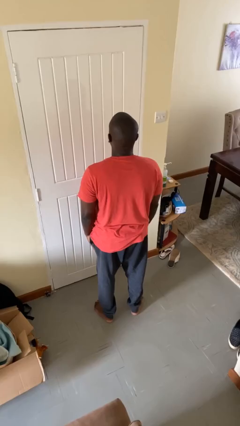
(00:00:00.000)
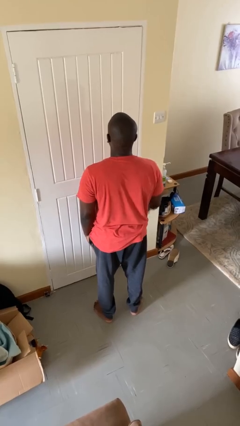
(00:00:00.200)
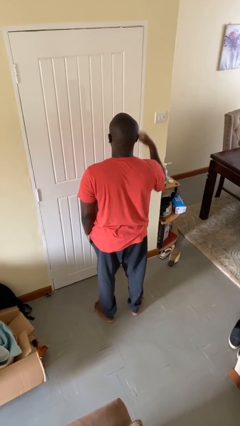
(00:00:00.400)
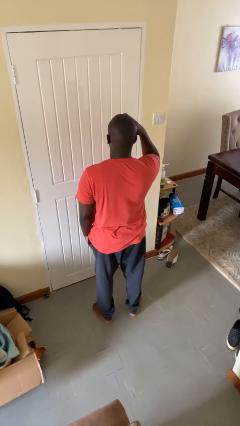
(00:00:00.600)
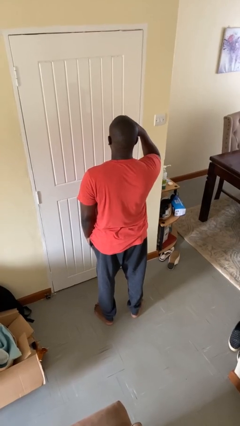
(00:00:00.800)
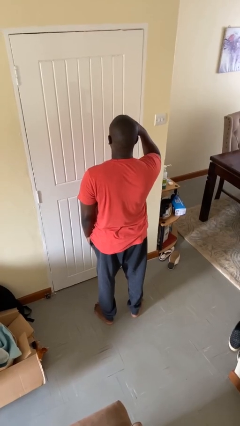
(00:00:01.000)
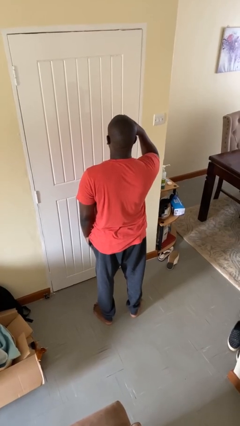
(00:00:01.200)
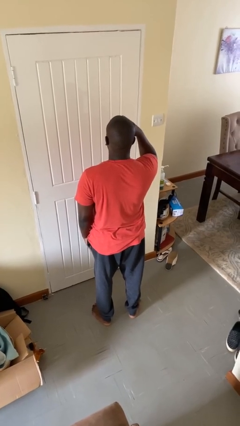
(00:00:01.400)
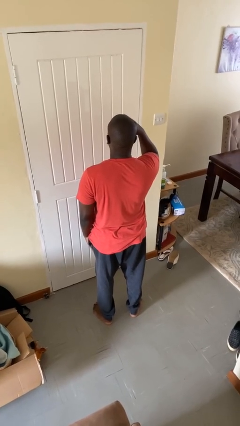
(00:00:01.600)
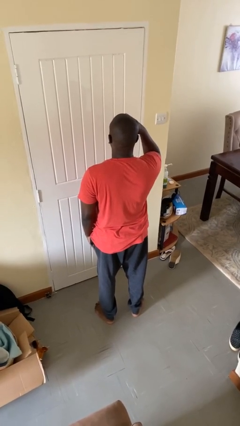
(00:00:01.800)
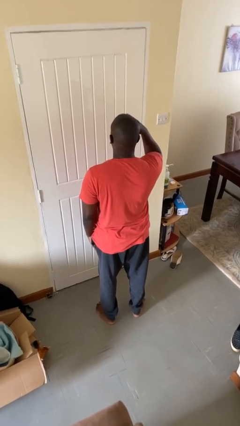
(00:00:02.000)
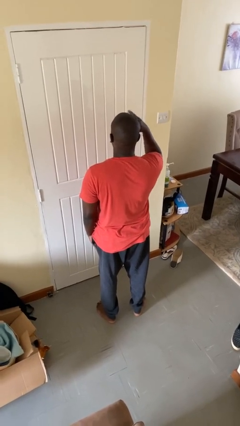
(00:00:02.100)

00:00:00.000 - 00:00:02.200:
person salutes

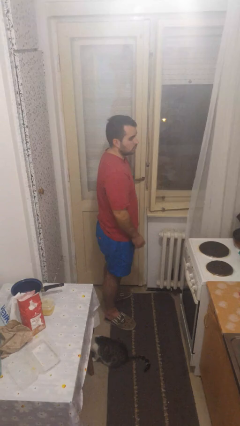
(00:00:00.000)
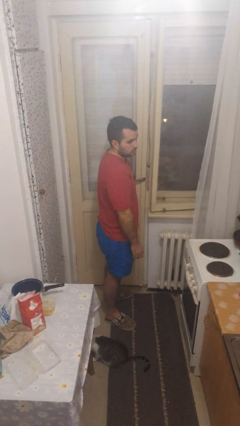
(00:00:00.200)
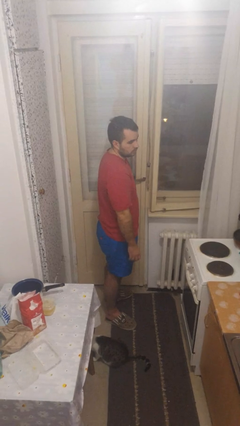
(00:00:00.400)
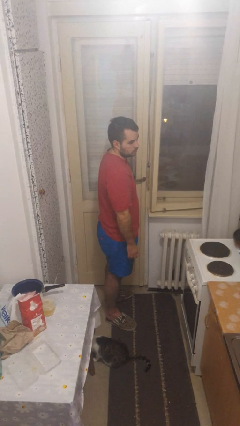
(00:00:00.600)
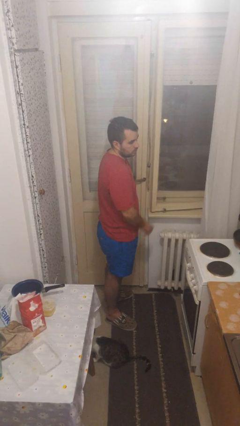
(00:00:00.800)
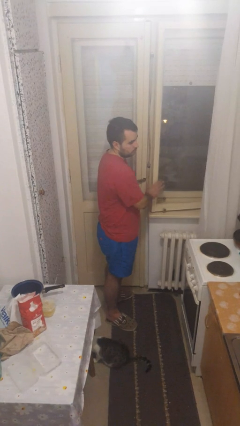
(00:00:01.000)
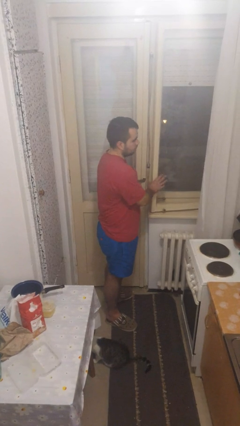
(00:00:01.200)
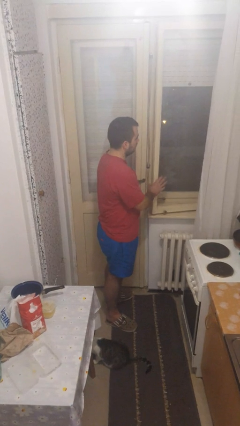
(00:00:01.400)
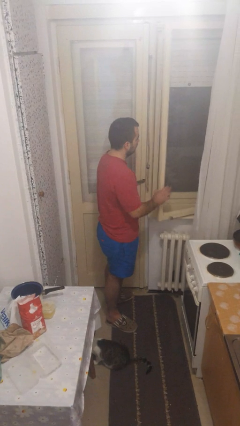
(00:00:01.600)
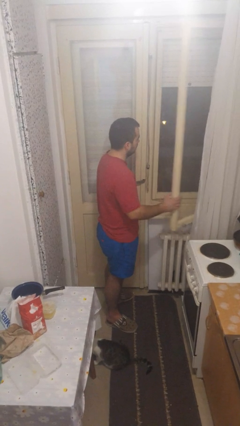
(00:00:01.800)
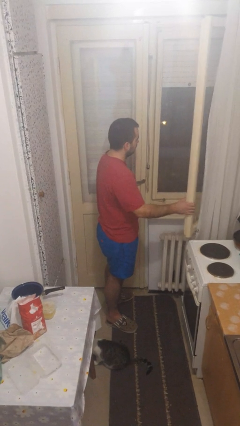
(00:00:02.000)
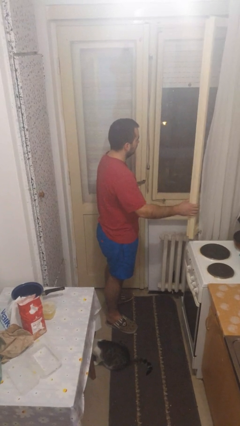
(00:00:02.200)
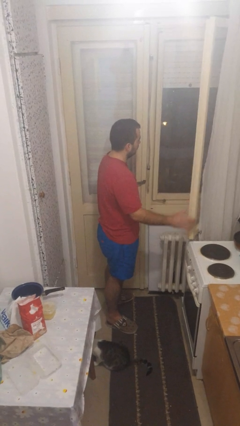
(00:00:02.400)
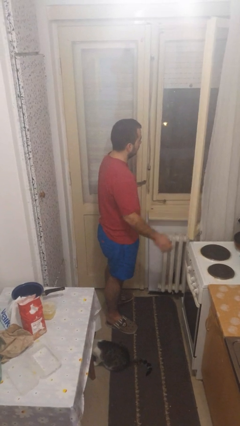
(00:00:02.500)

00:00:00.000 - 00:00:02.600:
person opens home window

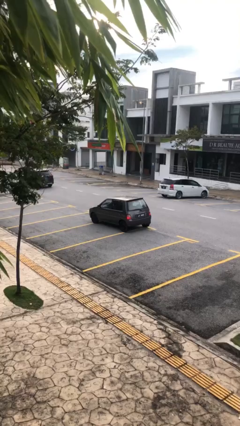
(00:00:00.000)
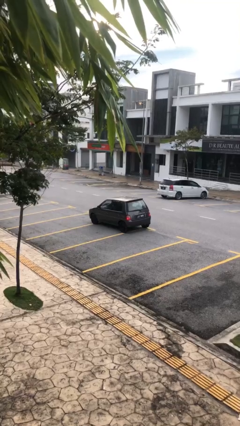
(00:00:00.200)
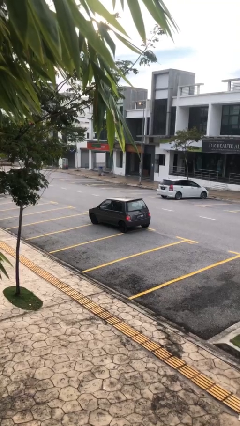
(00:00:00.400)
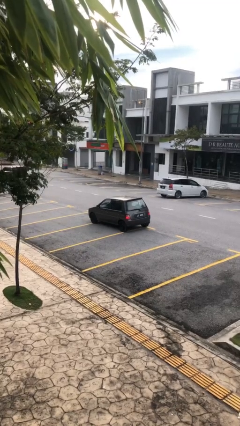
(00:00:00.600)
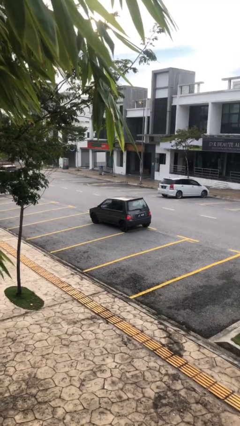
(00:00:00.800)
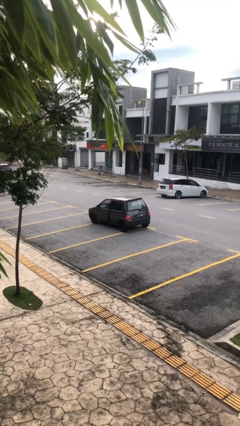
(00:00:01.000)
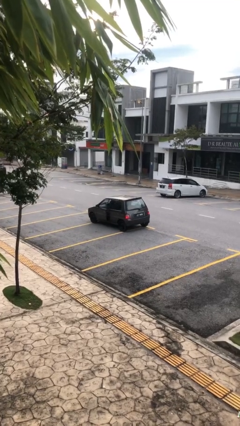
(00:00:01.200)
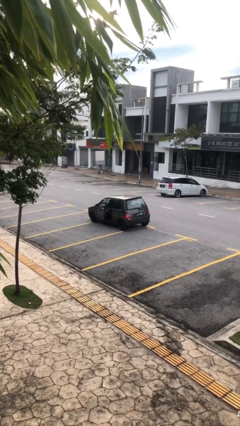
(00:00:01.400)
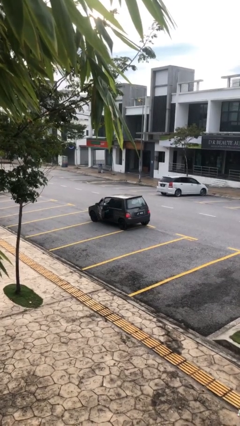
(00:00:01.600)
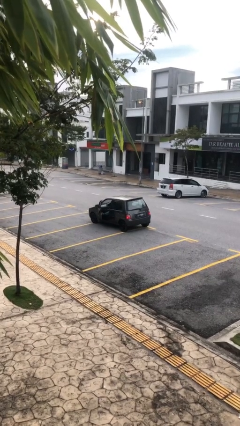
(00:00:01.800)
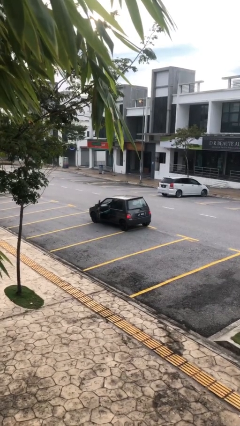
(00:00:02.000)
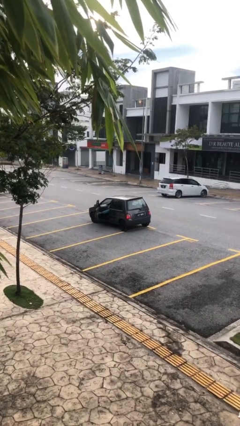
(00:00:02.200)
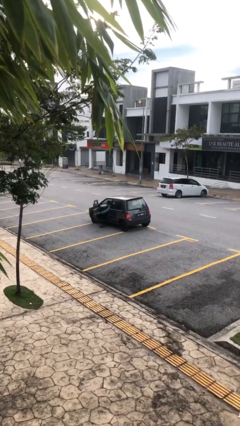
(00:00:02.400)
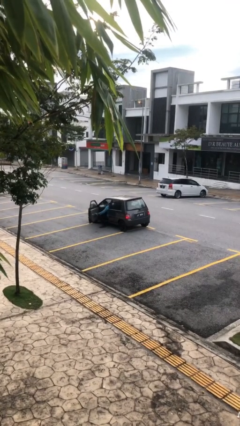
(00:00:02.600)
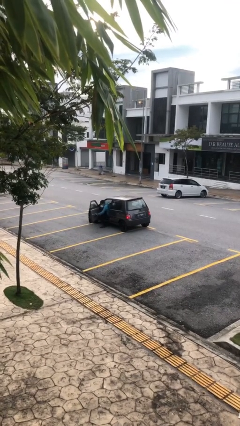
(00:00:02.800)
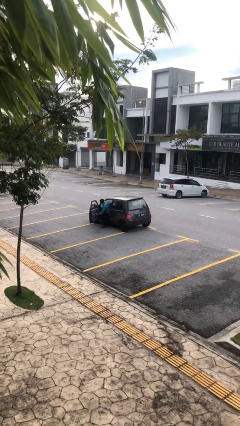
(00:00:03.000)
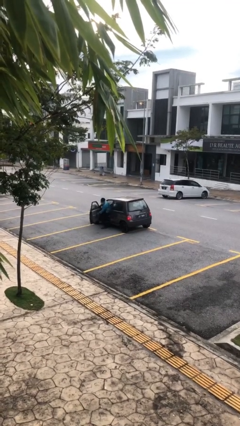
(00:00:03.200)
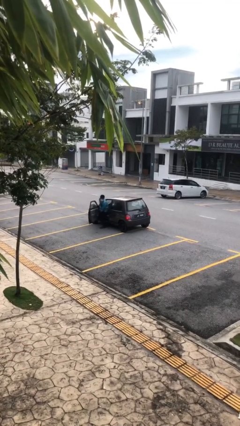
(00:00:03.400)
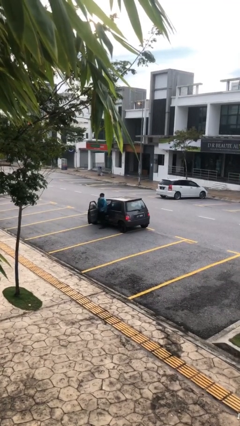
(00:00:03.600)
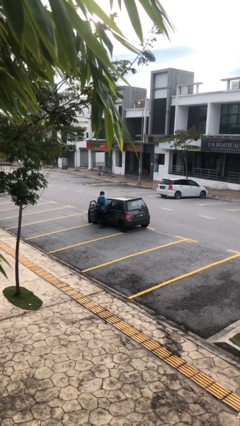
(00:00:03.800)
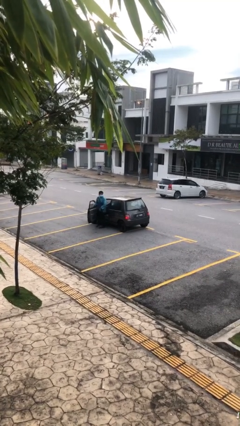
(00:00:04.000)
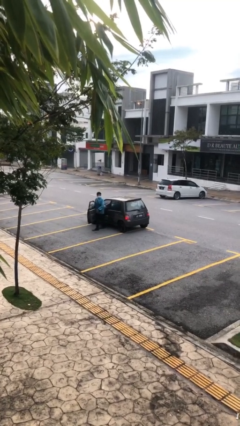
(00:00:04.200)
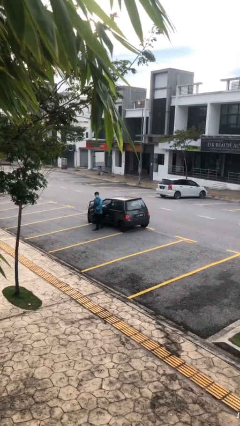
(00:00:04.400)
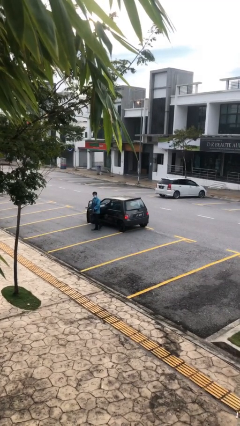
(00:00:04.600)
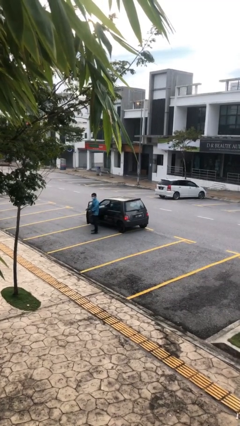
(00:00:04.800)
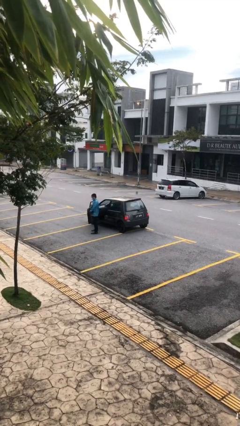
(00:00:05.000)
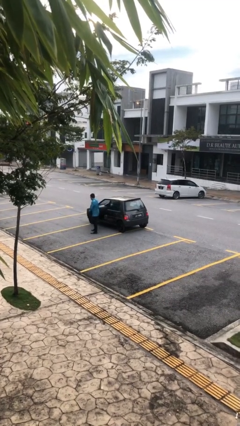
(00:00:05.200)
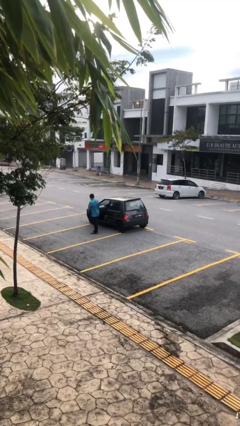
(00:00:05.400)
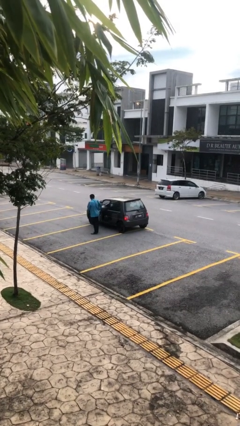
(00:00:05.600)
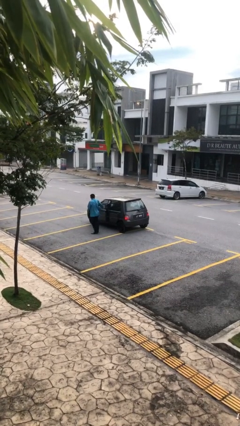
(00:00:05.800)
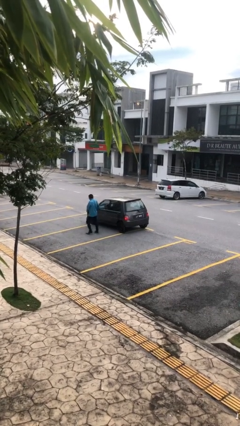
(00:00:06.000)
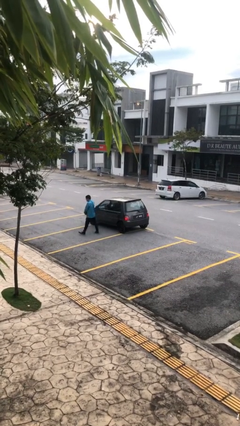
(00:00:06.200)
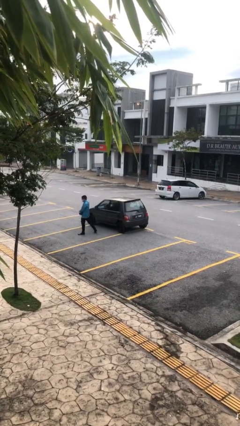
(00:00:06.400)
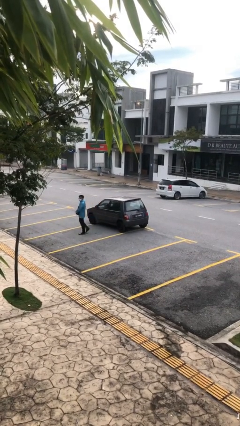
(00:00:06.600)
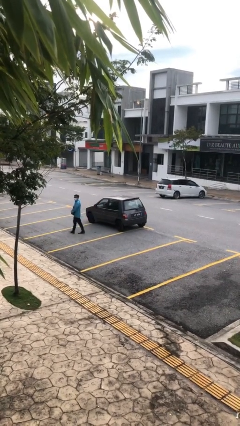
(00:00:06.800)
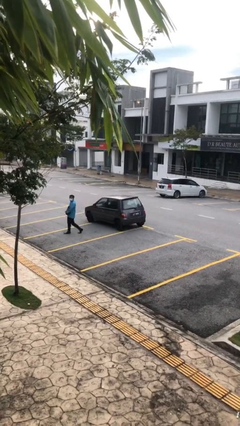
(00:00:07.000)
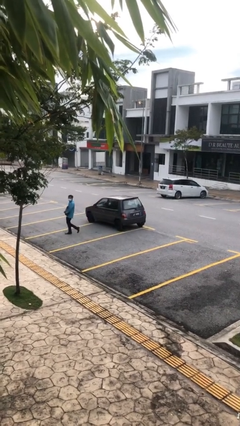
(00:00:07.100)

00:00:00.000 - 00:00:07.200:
car drops off person

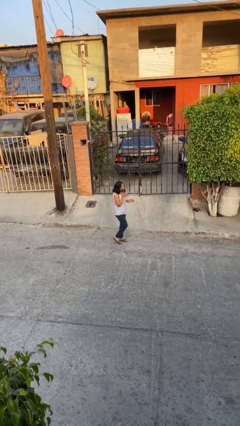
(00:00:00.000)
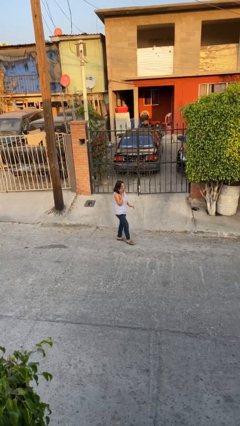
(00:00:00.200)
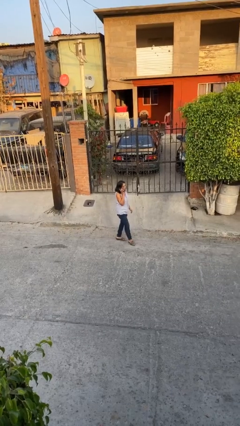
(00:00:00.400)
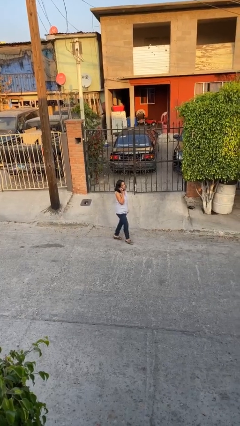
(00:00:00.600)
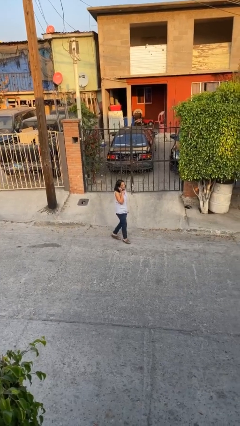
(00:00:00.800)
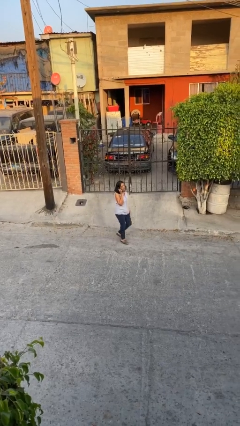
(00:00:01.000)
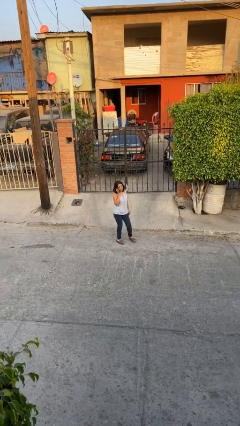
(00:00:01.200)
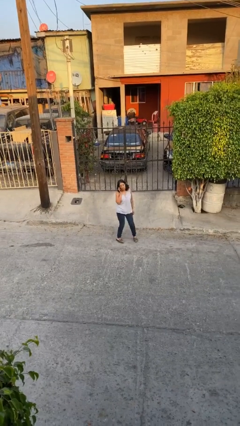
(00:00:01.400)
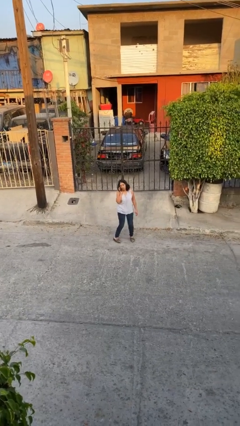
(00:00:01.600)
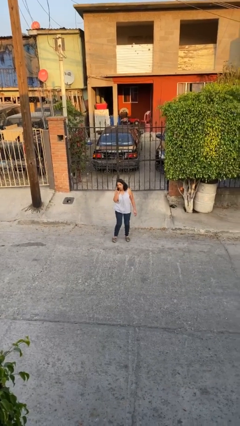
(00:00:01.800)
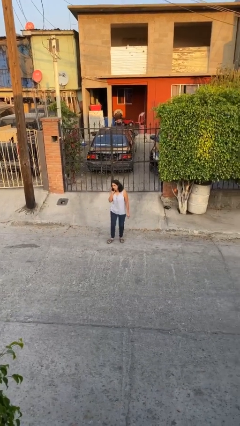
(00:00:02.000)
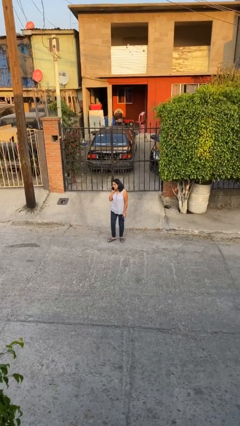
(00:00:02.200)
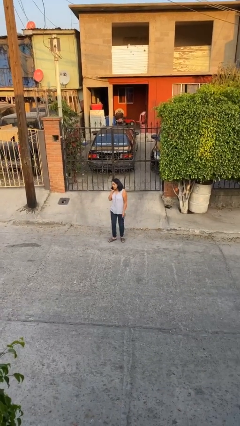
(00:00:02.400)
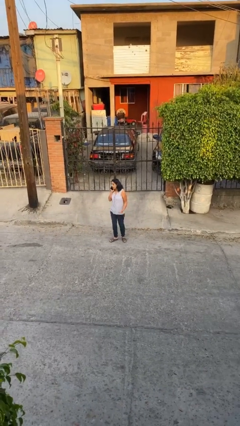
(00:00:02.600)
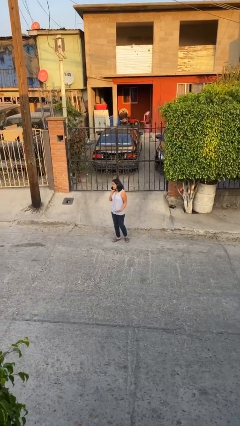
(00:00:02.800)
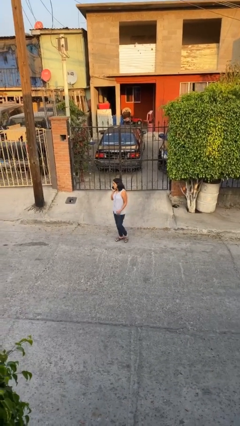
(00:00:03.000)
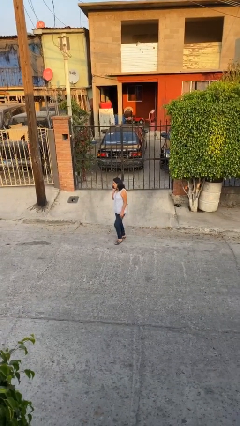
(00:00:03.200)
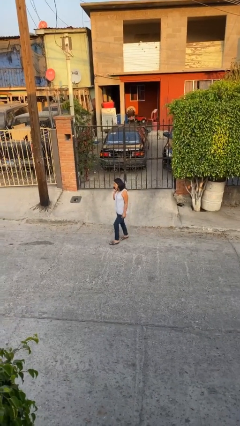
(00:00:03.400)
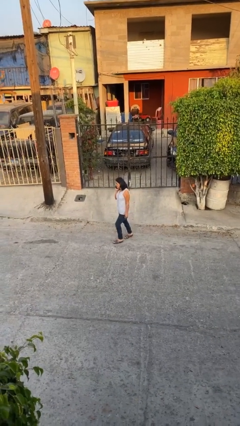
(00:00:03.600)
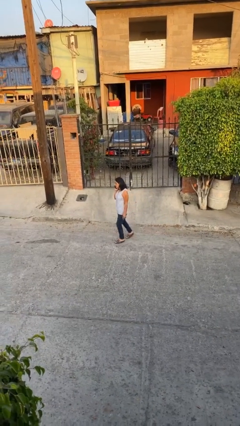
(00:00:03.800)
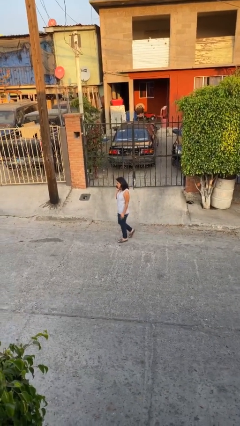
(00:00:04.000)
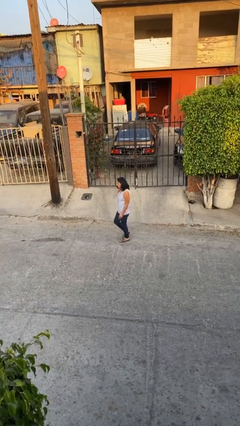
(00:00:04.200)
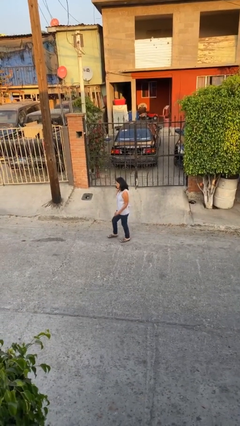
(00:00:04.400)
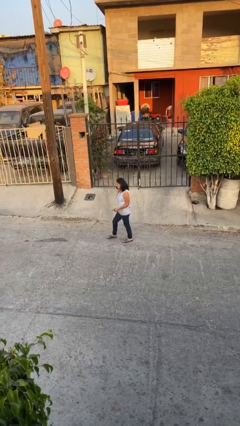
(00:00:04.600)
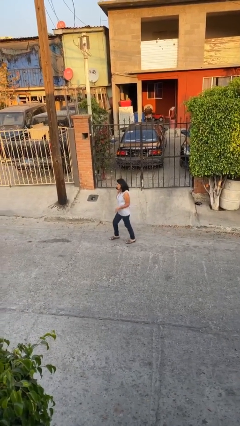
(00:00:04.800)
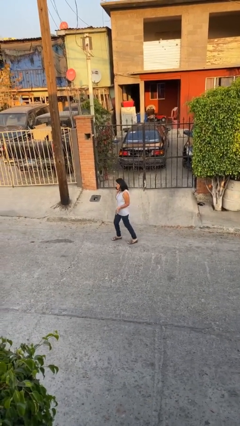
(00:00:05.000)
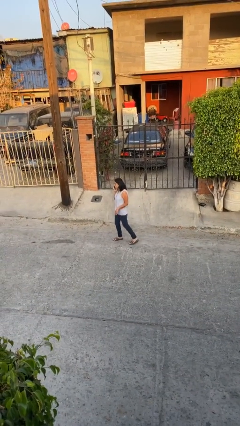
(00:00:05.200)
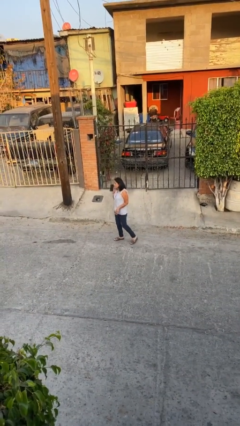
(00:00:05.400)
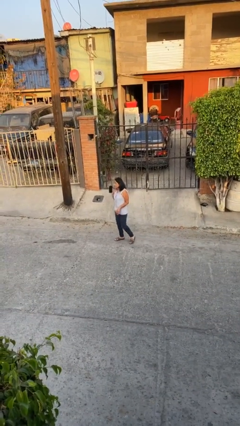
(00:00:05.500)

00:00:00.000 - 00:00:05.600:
person talks on phone

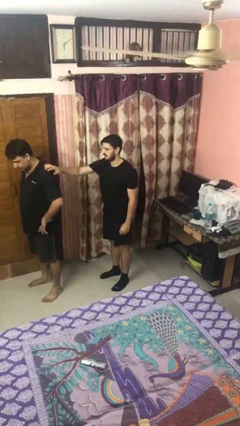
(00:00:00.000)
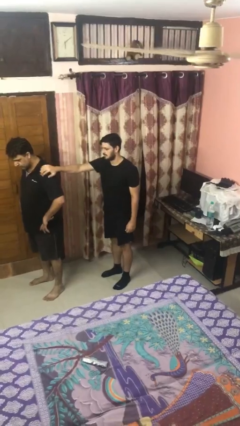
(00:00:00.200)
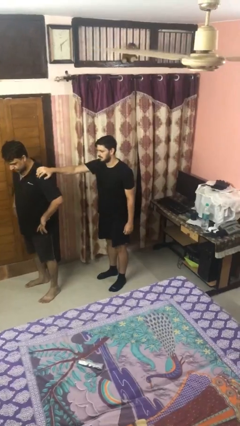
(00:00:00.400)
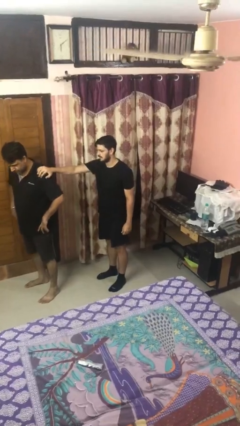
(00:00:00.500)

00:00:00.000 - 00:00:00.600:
person grabs person by shoulder
